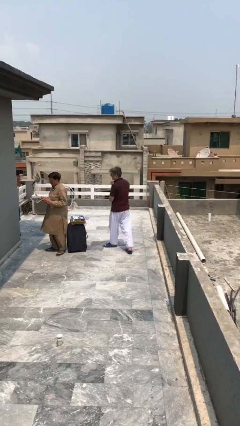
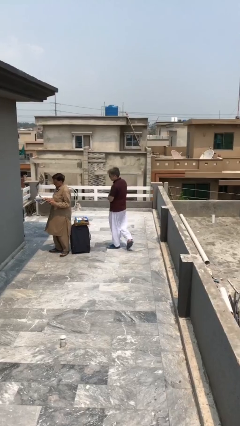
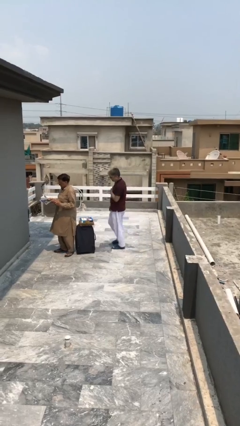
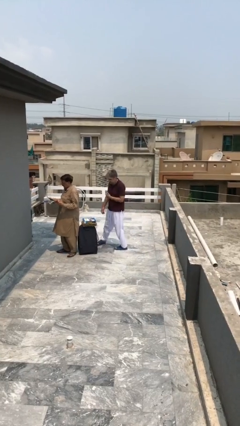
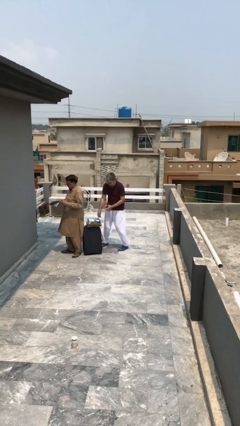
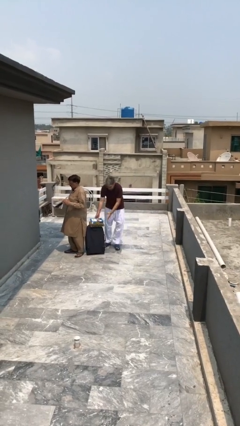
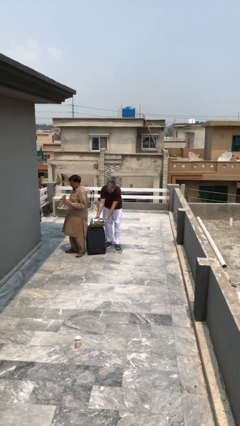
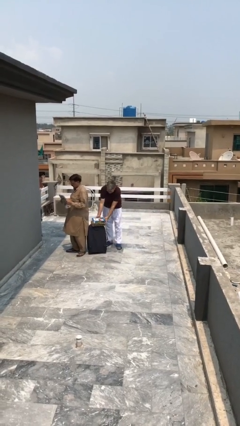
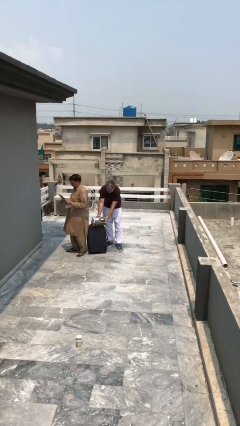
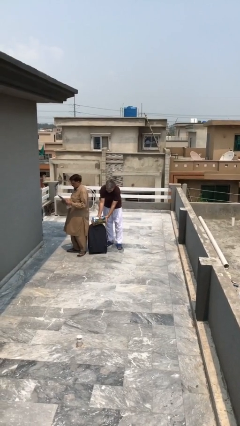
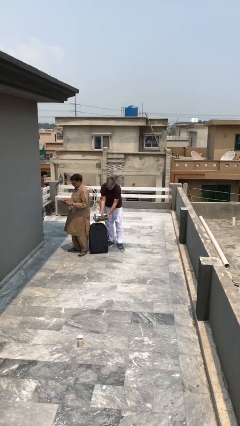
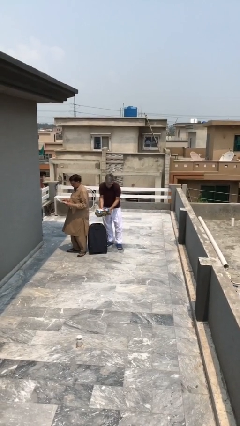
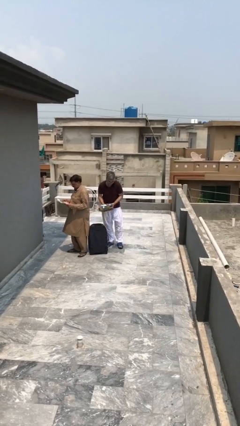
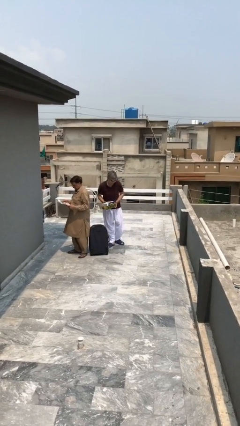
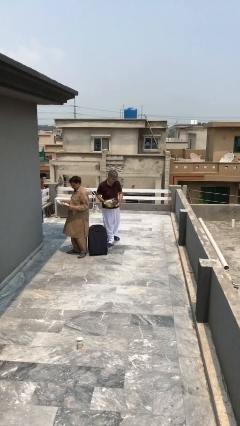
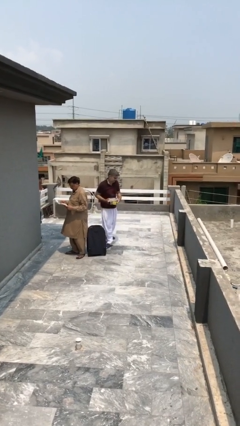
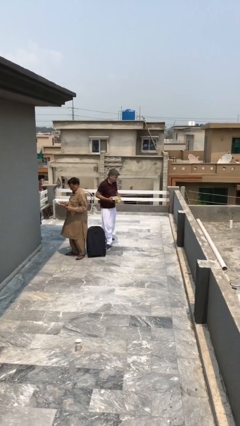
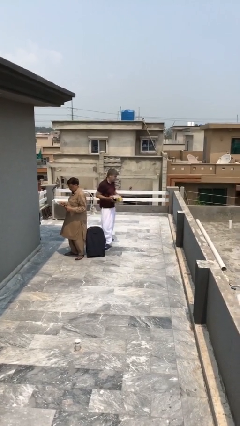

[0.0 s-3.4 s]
person steals object from person

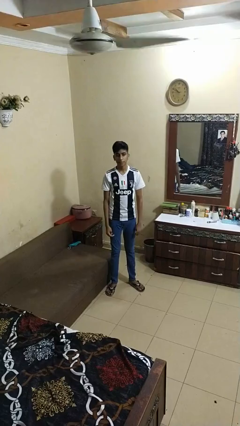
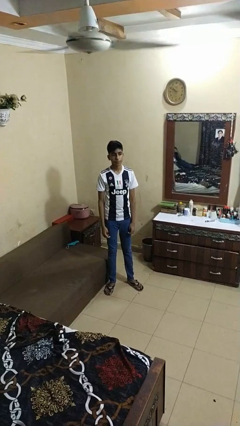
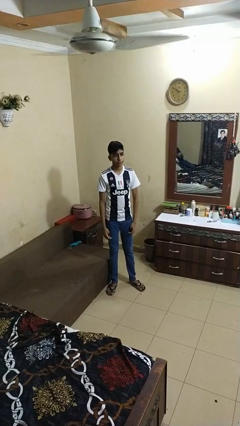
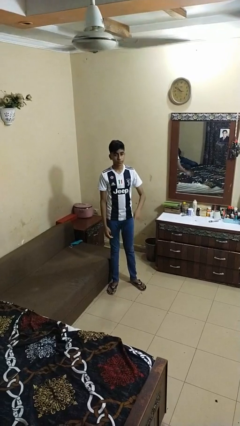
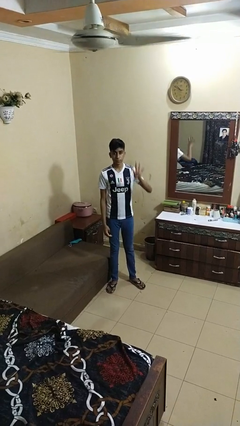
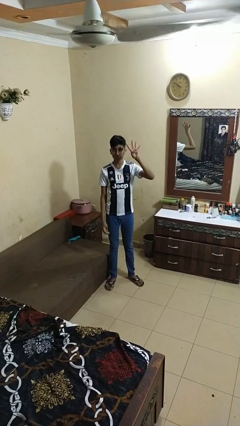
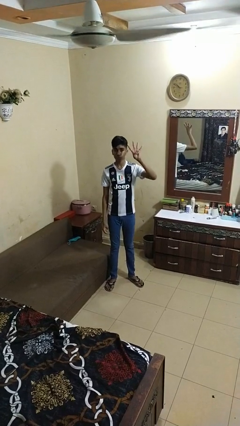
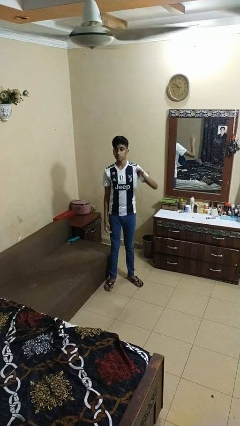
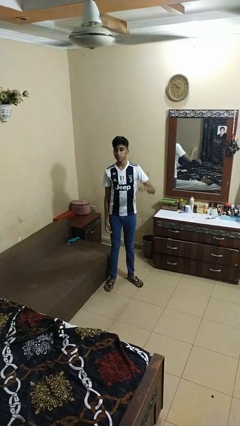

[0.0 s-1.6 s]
person gestures number four

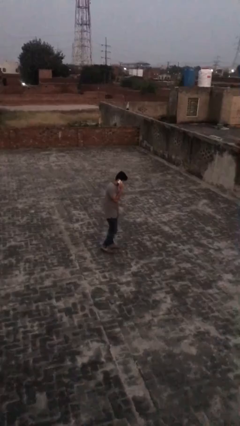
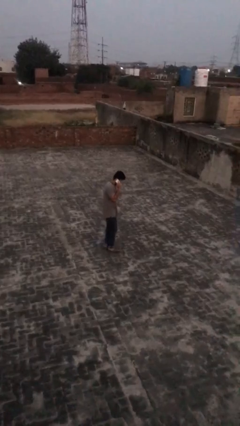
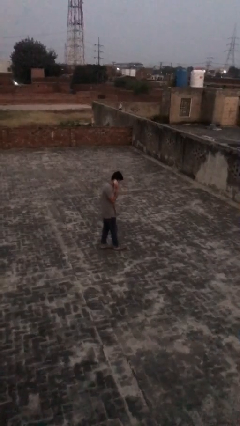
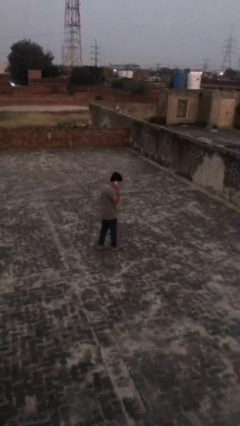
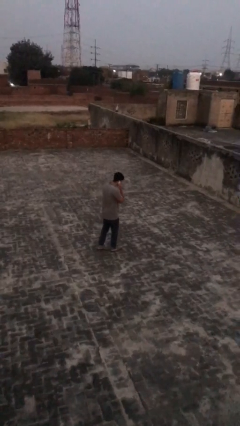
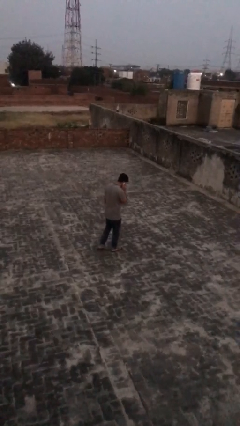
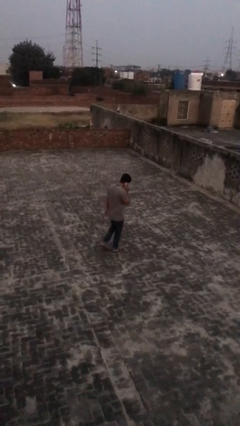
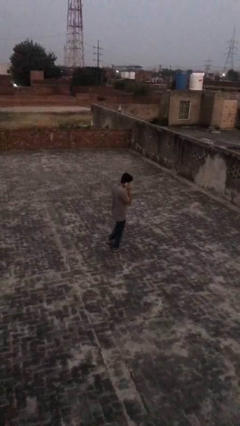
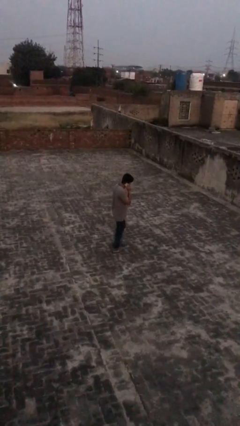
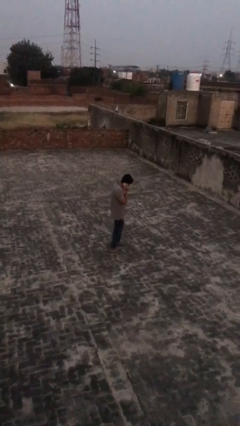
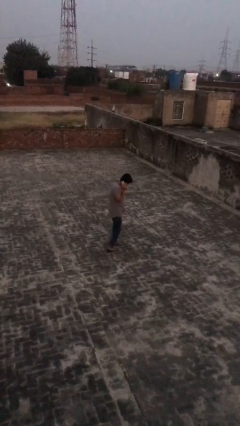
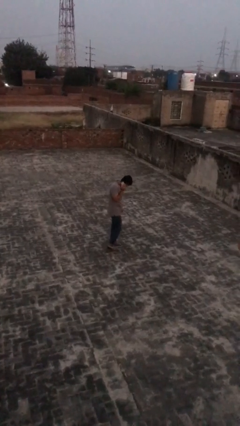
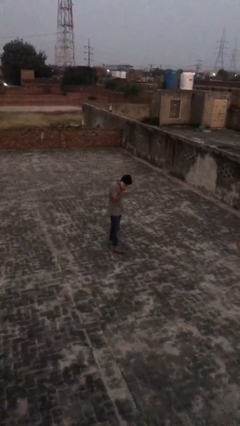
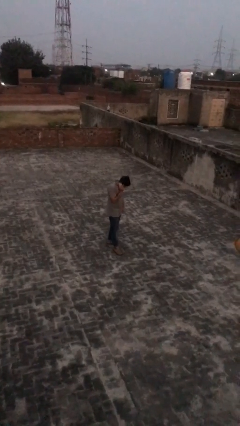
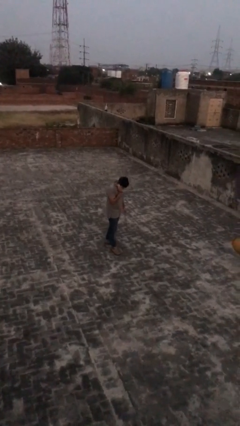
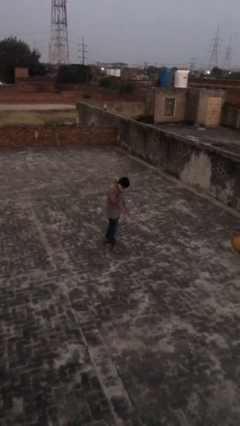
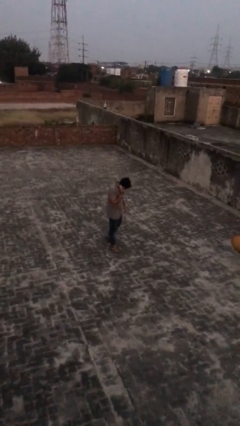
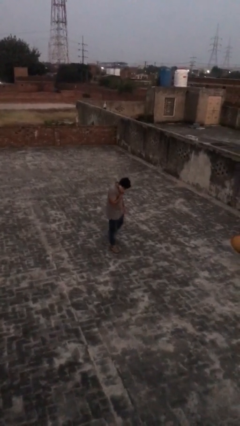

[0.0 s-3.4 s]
person talks on phone

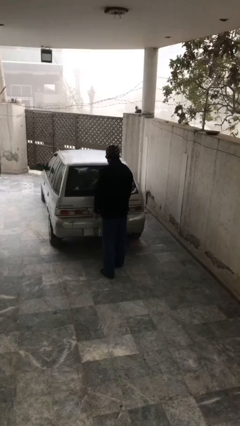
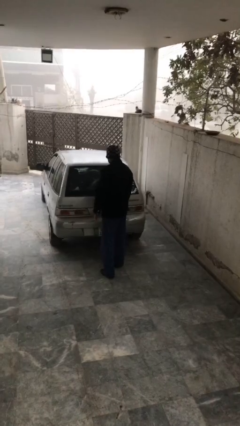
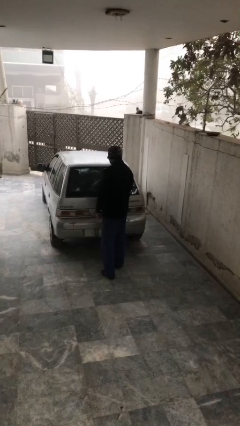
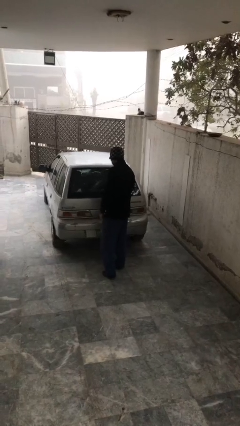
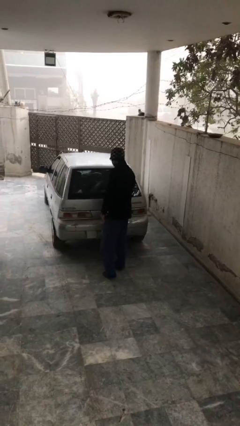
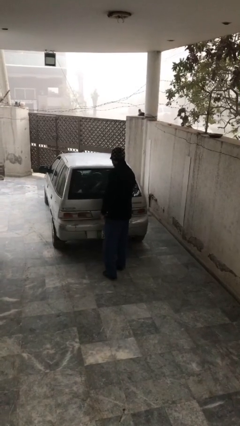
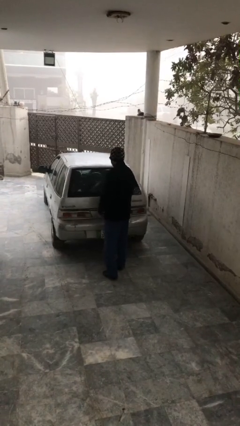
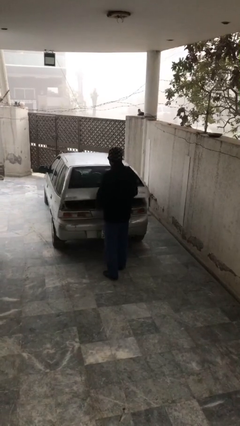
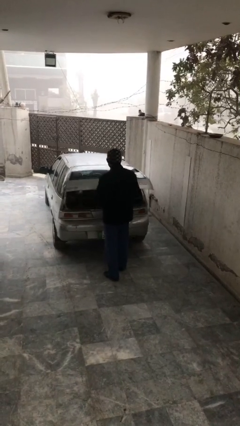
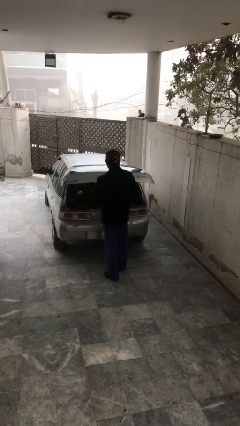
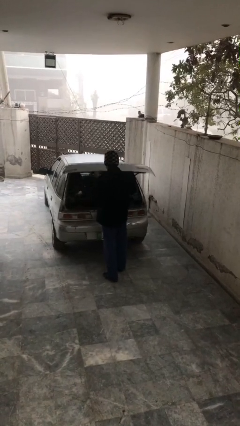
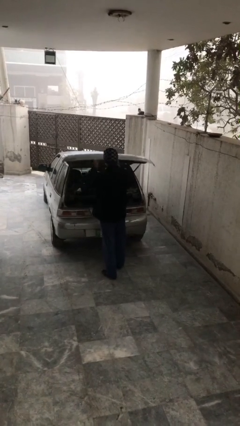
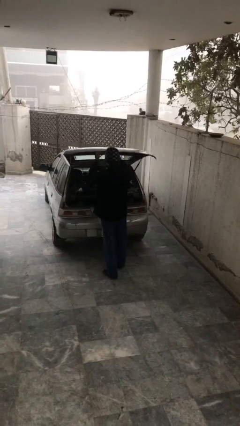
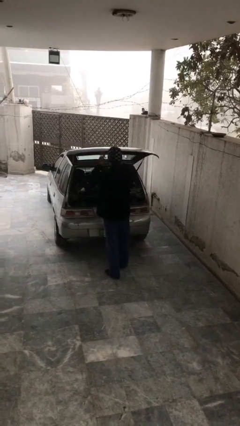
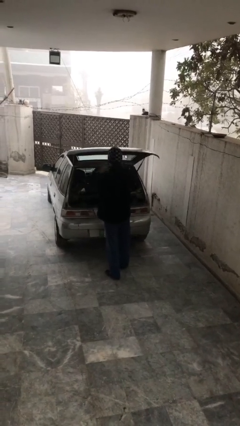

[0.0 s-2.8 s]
person opens car trunk

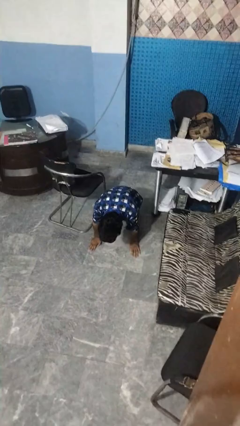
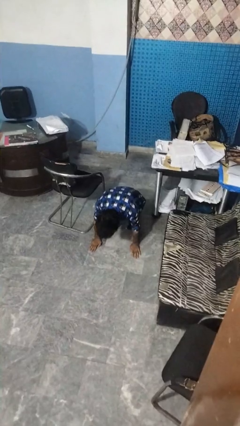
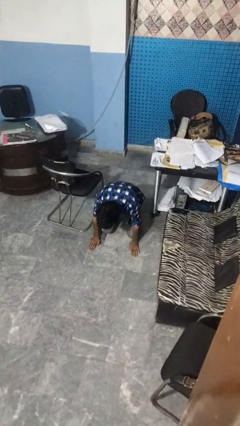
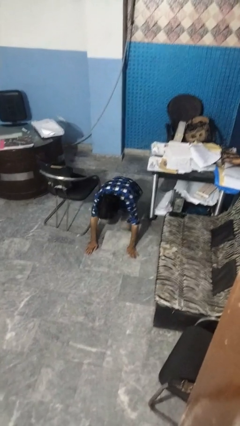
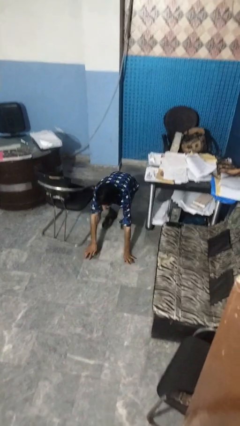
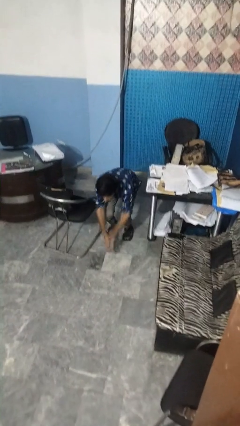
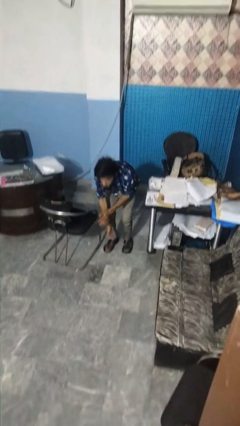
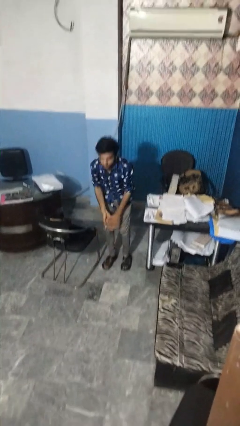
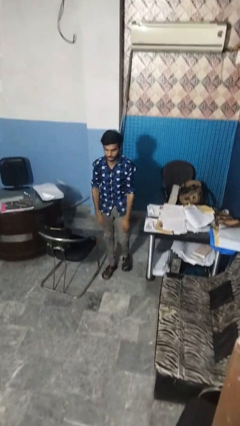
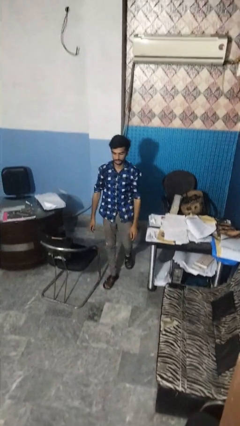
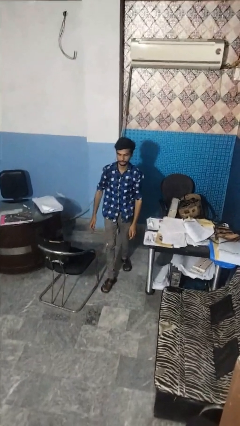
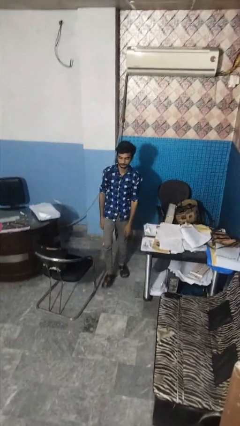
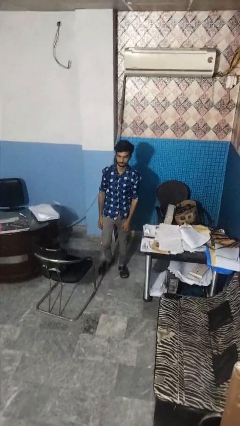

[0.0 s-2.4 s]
person stands up from floor

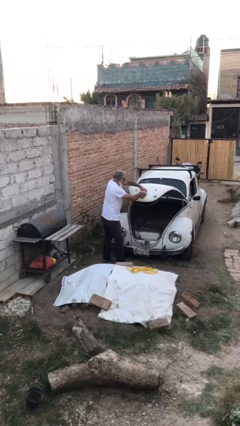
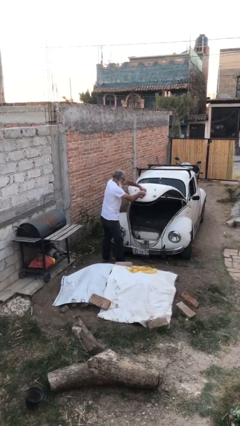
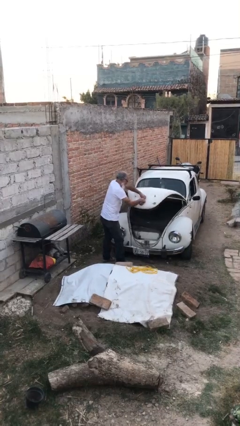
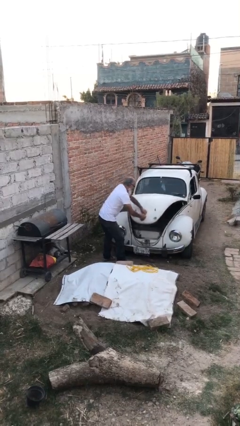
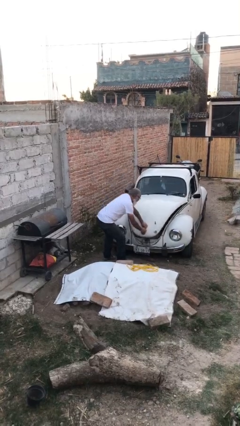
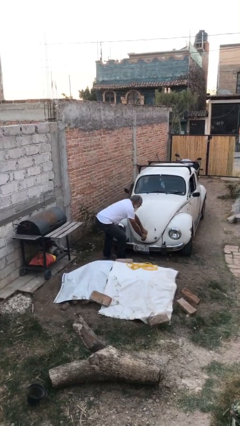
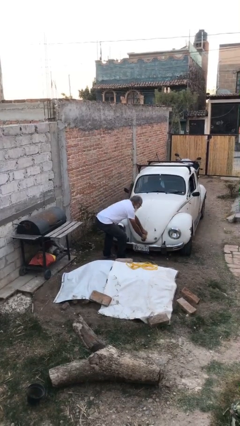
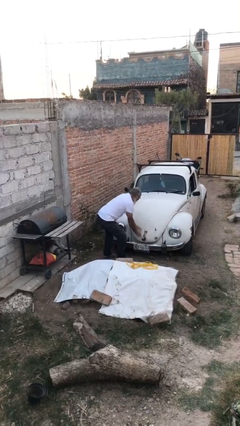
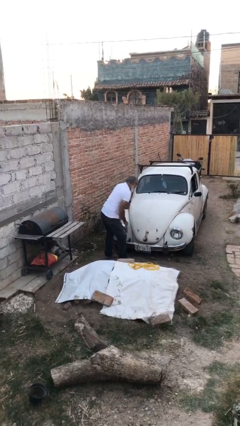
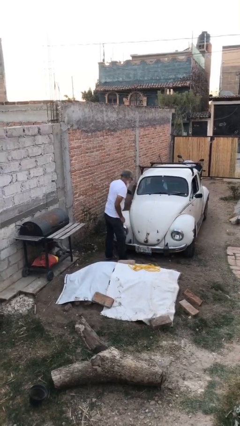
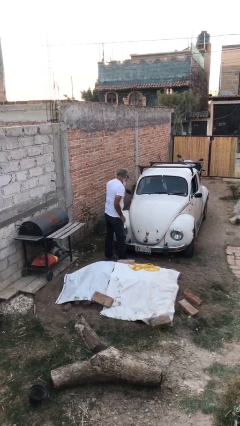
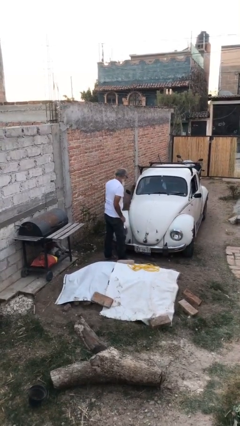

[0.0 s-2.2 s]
person closes car trunk

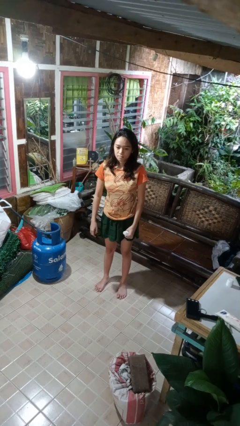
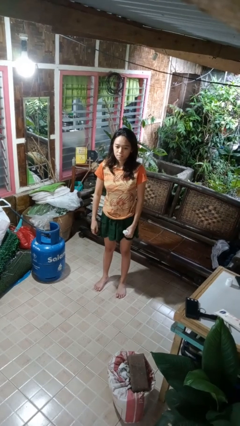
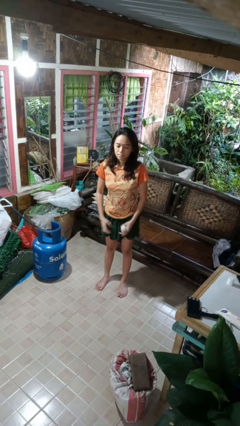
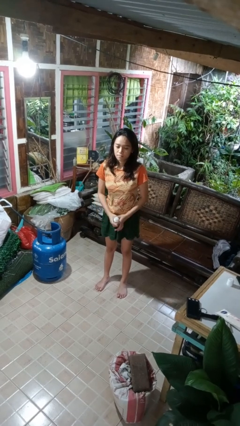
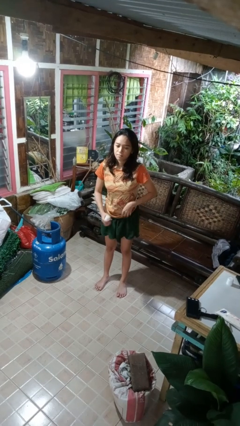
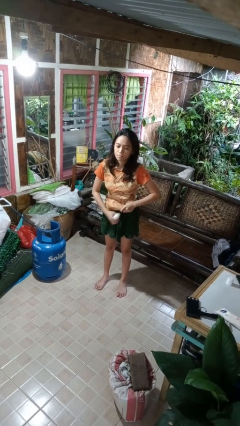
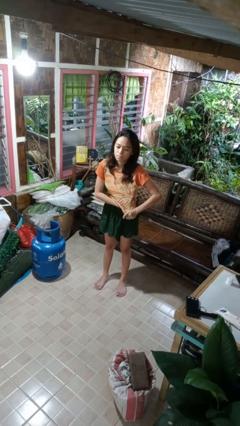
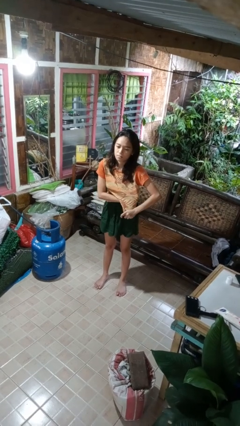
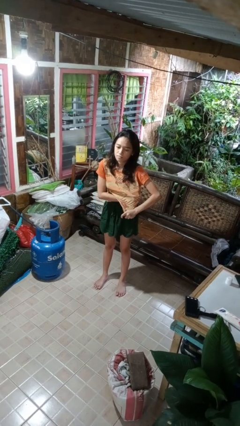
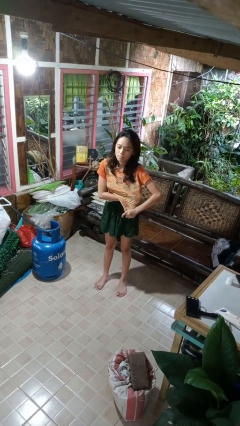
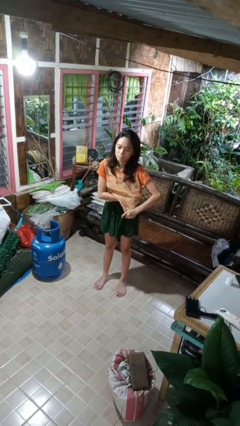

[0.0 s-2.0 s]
person applies deodorant
